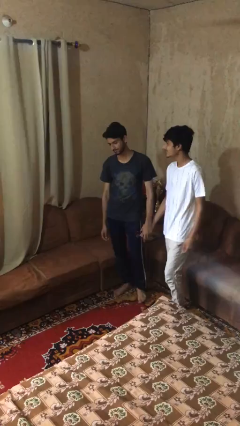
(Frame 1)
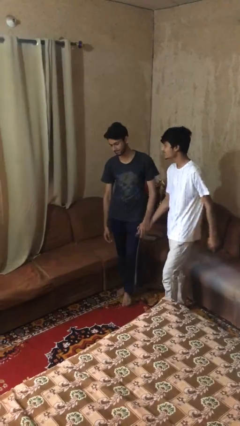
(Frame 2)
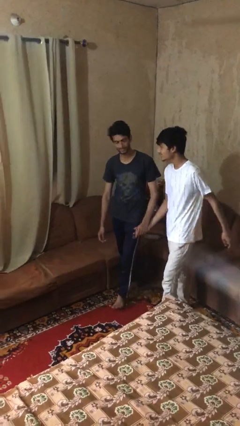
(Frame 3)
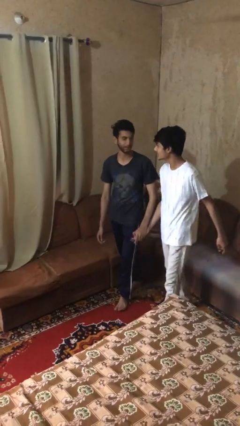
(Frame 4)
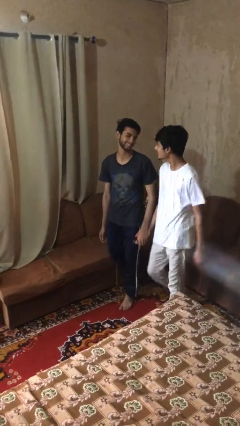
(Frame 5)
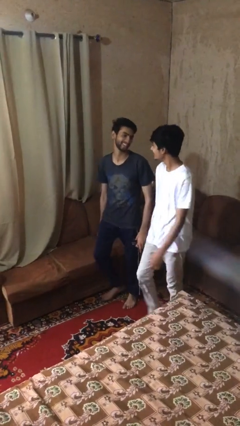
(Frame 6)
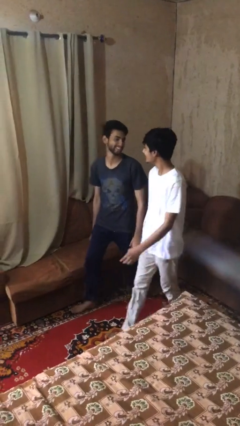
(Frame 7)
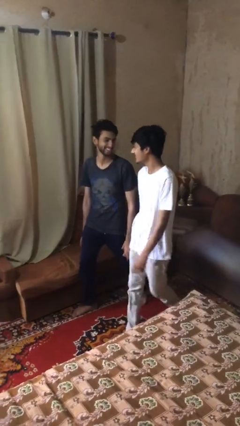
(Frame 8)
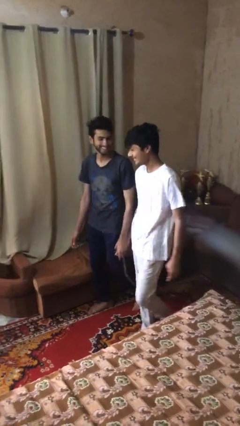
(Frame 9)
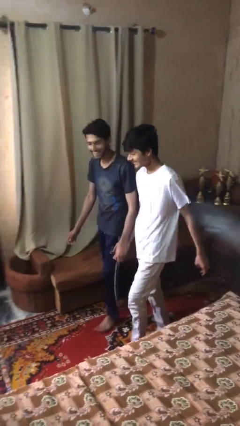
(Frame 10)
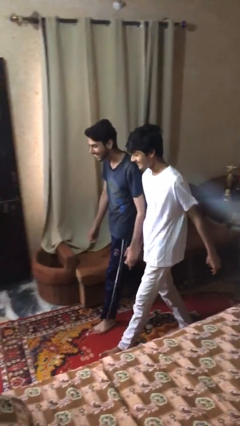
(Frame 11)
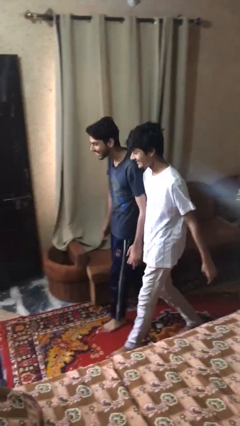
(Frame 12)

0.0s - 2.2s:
person holds hand

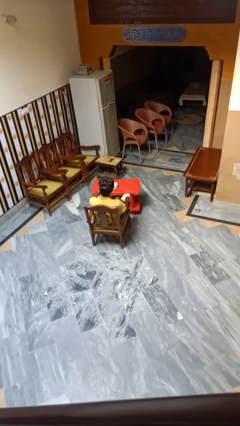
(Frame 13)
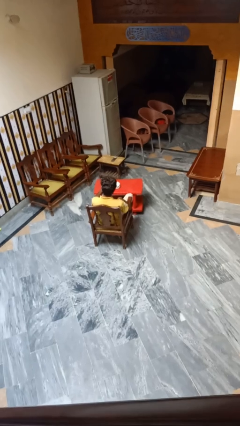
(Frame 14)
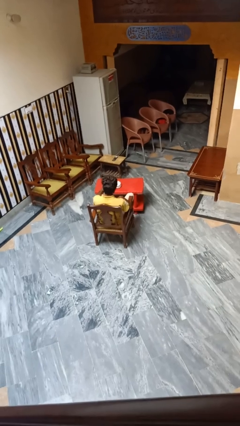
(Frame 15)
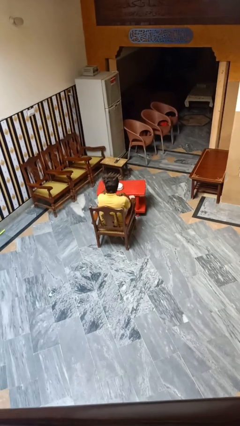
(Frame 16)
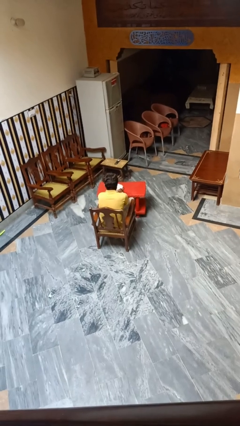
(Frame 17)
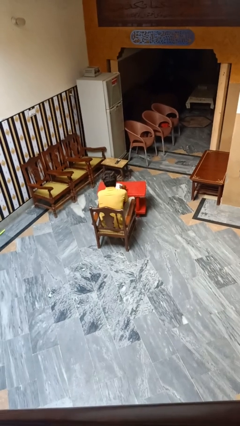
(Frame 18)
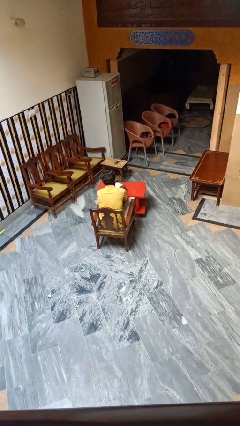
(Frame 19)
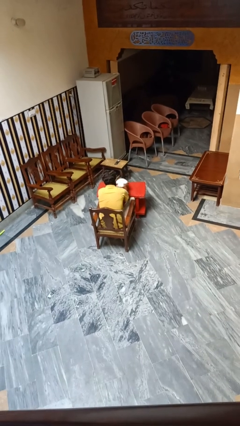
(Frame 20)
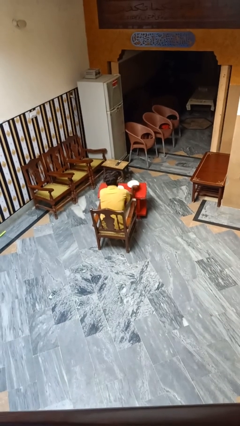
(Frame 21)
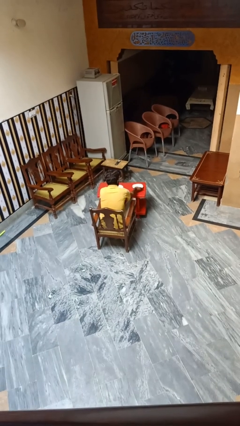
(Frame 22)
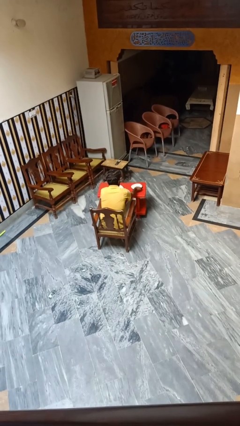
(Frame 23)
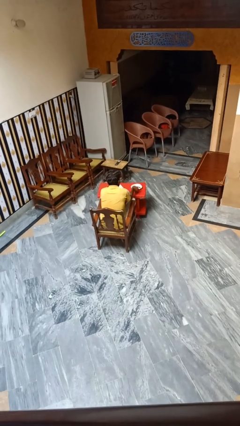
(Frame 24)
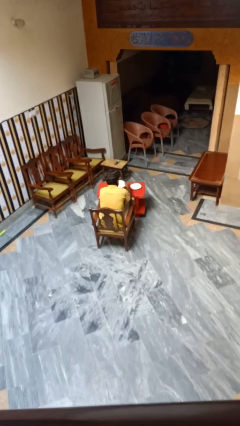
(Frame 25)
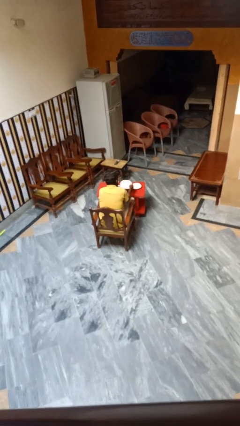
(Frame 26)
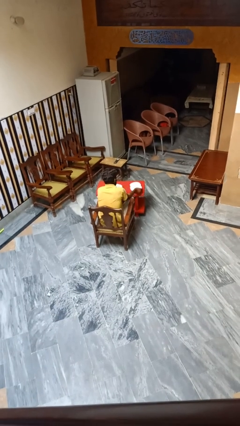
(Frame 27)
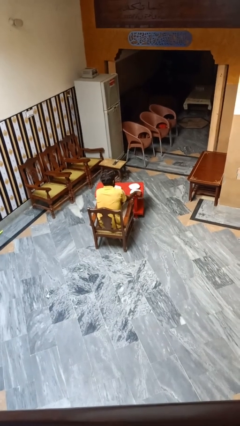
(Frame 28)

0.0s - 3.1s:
person sets table

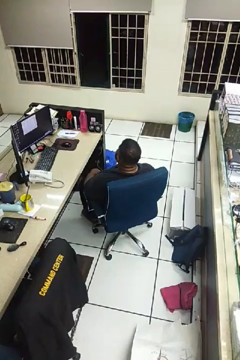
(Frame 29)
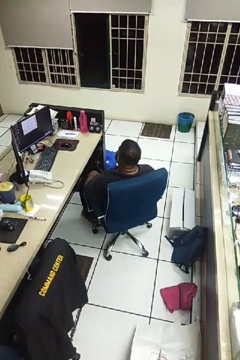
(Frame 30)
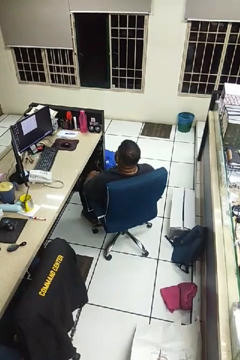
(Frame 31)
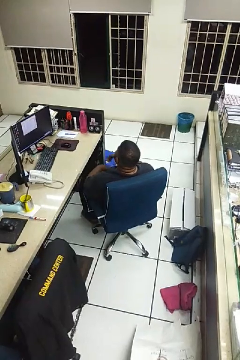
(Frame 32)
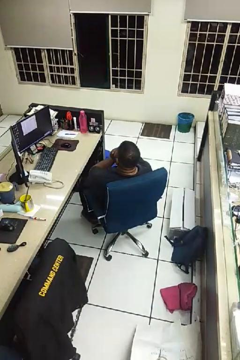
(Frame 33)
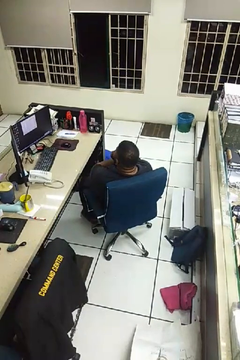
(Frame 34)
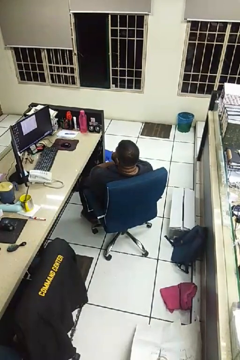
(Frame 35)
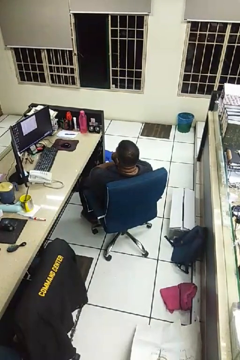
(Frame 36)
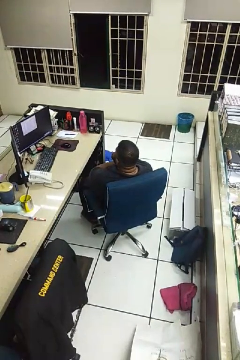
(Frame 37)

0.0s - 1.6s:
person strokes chin

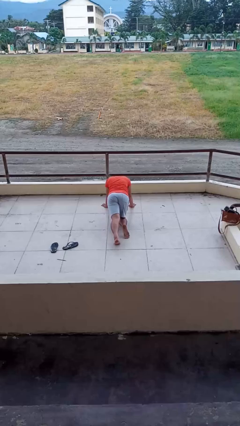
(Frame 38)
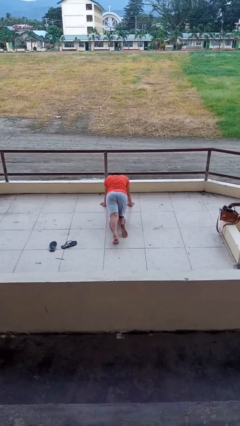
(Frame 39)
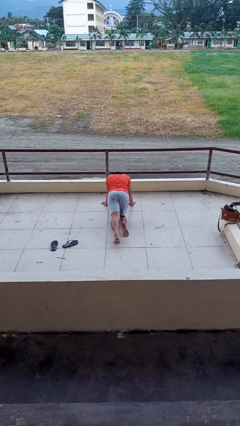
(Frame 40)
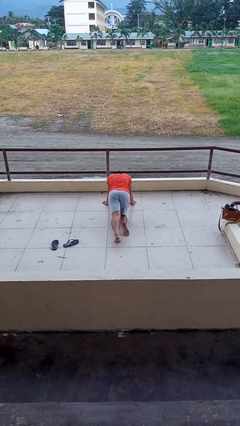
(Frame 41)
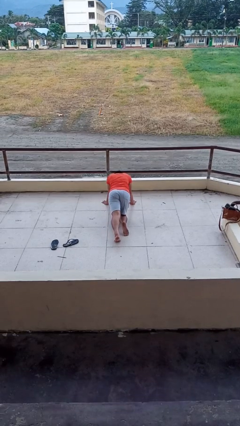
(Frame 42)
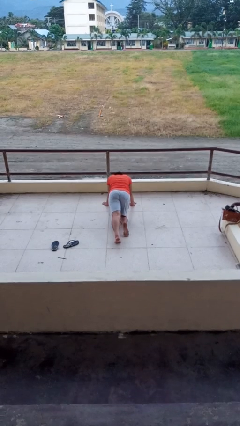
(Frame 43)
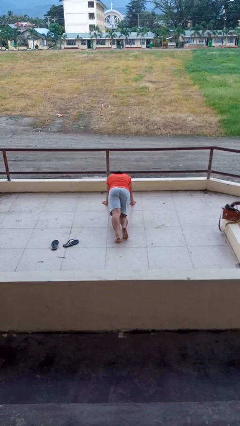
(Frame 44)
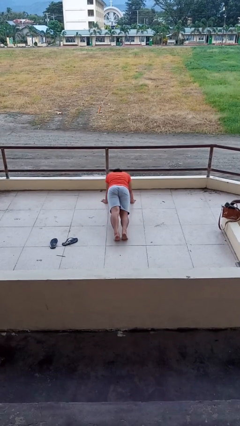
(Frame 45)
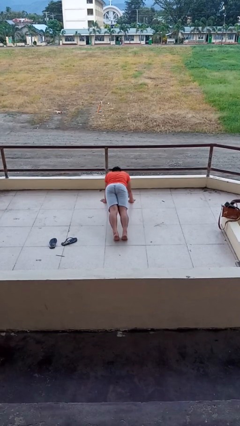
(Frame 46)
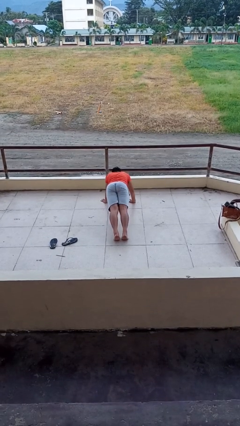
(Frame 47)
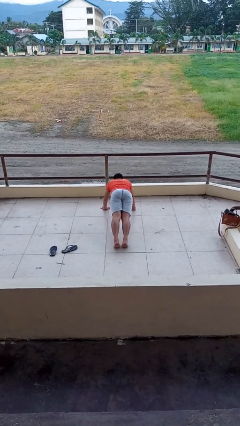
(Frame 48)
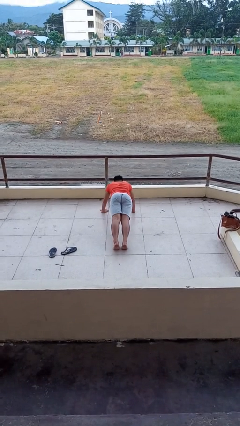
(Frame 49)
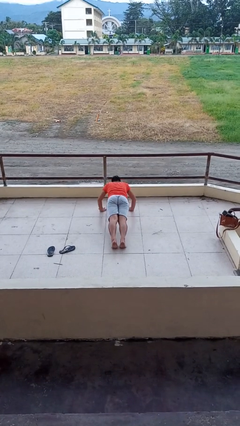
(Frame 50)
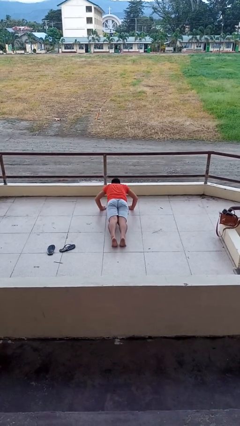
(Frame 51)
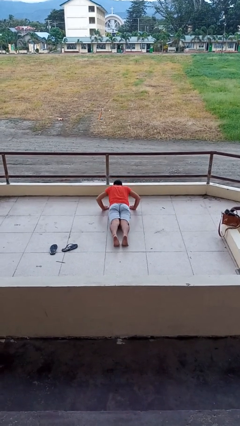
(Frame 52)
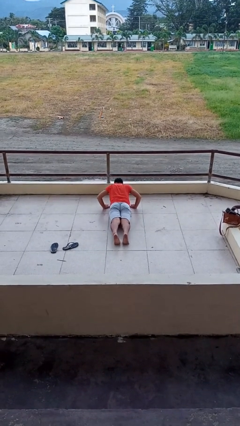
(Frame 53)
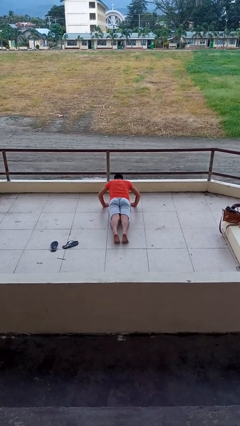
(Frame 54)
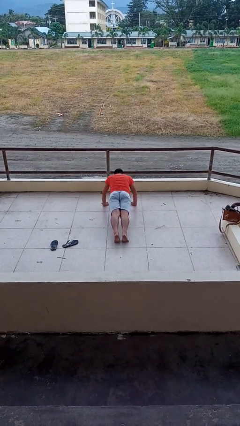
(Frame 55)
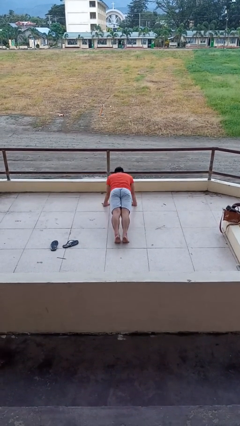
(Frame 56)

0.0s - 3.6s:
person exercises with pushup

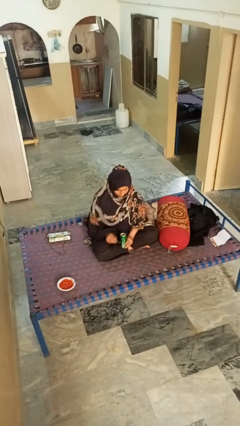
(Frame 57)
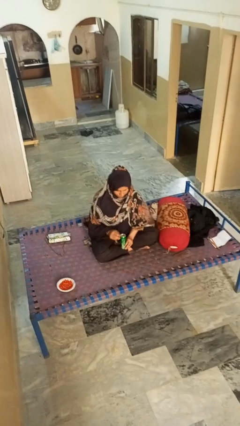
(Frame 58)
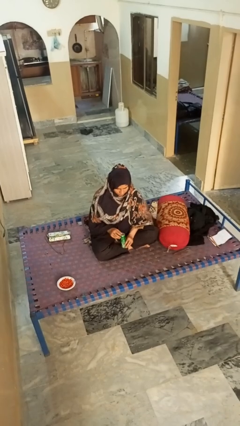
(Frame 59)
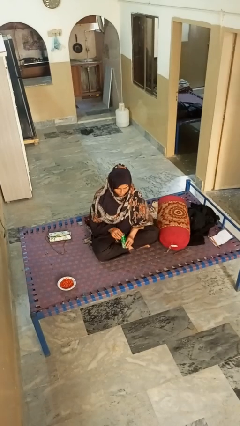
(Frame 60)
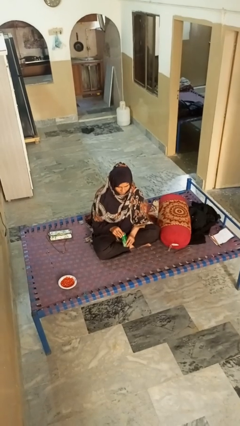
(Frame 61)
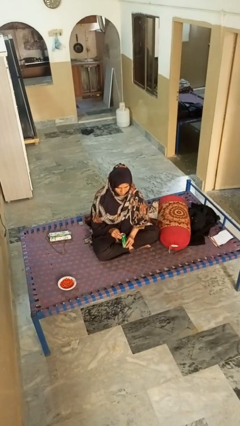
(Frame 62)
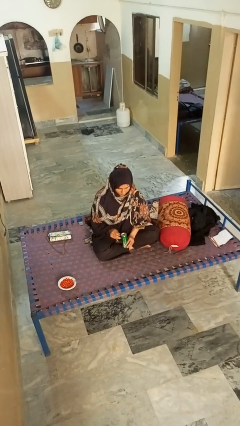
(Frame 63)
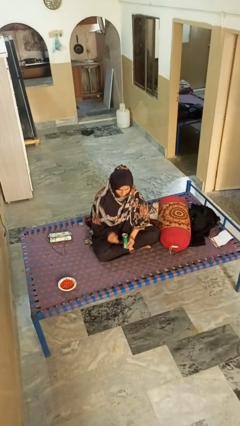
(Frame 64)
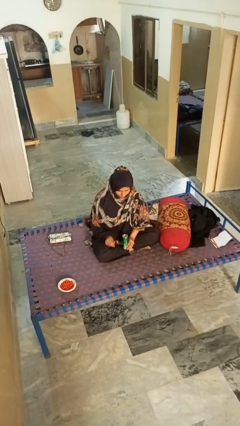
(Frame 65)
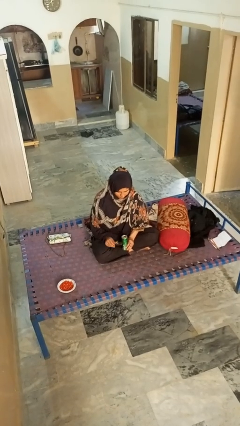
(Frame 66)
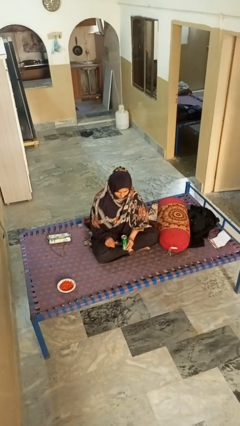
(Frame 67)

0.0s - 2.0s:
person opens can with can opener

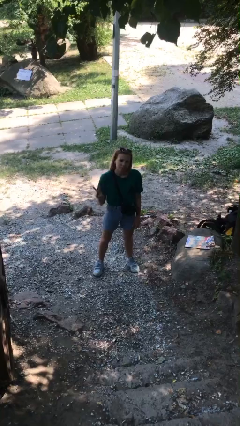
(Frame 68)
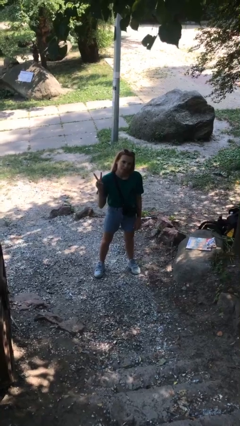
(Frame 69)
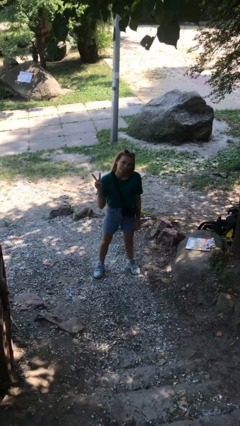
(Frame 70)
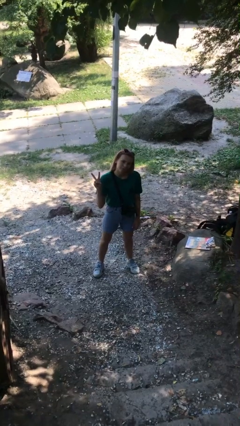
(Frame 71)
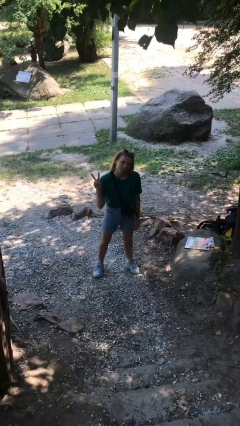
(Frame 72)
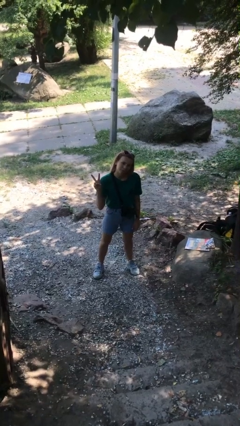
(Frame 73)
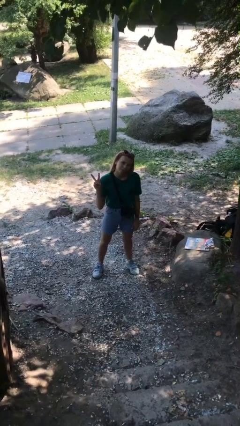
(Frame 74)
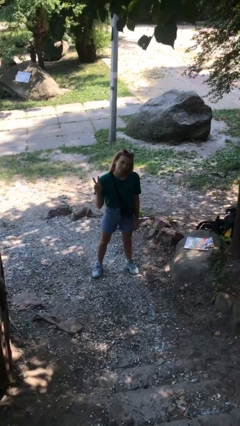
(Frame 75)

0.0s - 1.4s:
person gestures peace

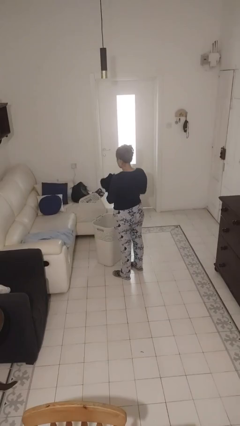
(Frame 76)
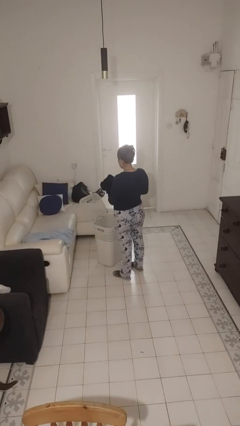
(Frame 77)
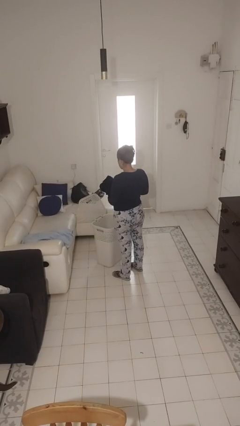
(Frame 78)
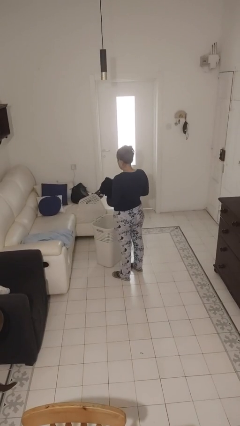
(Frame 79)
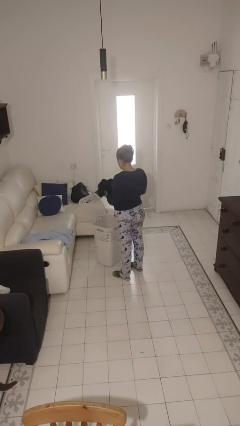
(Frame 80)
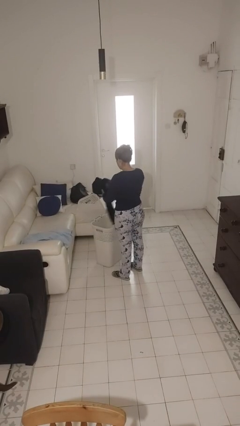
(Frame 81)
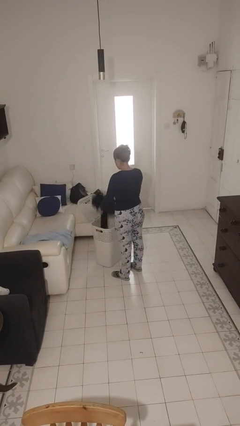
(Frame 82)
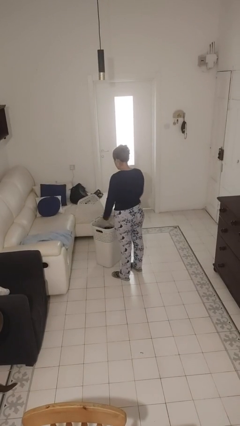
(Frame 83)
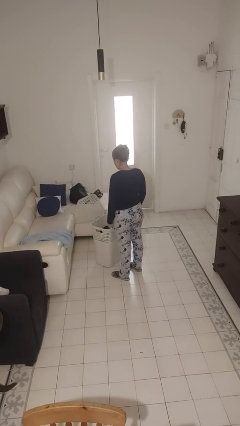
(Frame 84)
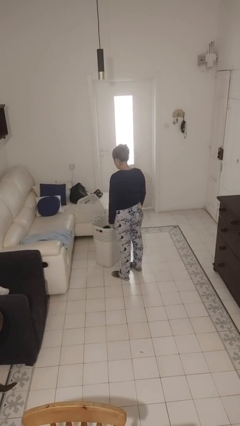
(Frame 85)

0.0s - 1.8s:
person puts object into basket

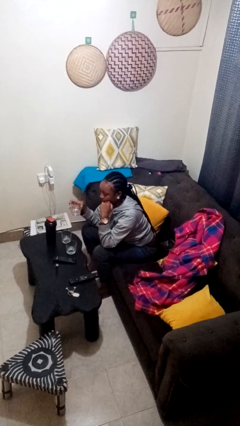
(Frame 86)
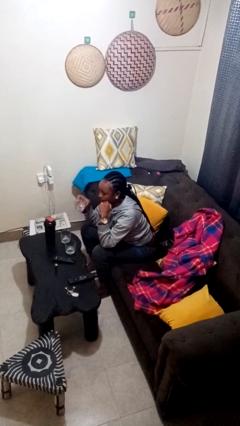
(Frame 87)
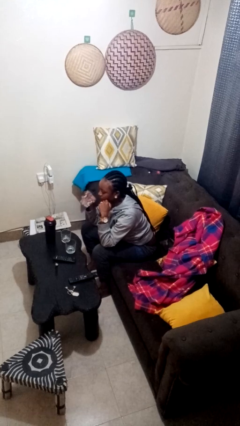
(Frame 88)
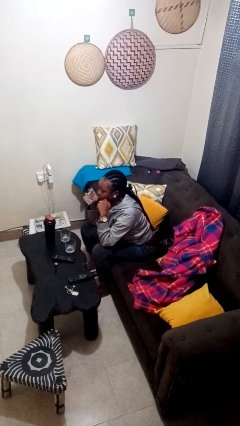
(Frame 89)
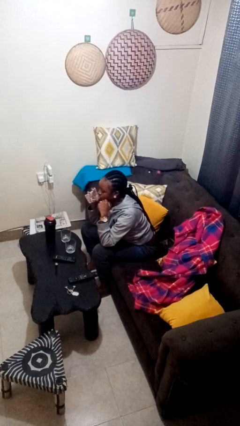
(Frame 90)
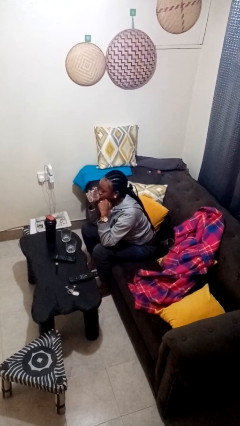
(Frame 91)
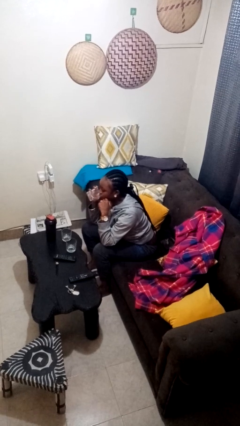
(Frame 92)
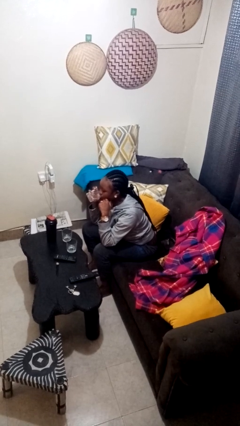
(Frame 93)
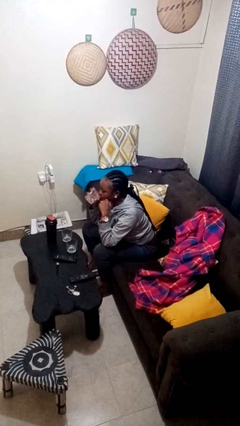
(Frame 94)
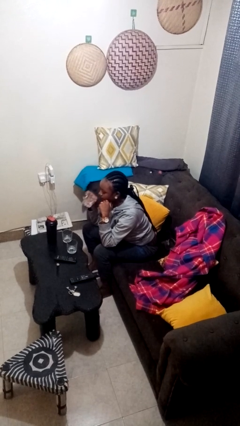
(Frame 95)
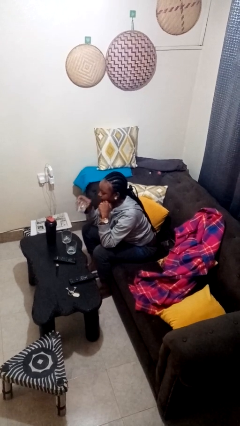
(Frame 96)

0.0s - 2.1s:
person drinks from shotglass
